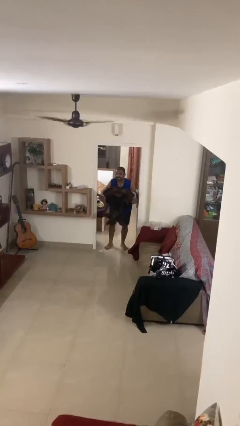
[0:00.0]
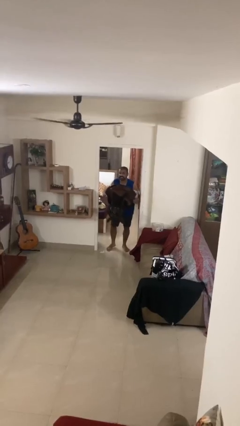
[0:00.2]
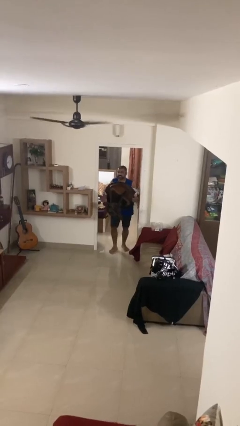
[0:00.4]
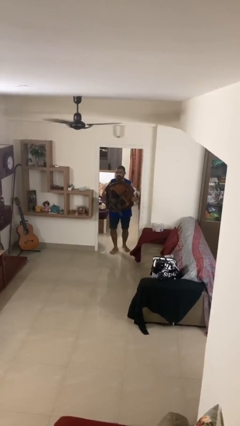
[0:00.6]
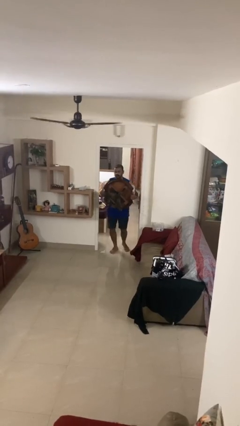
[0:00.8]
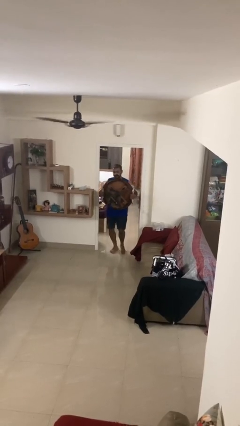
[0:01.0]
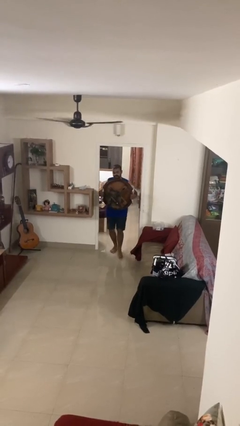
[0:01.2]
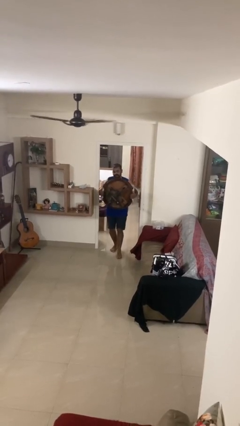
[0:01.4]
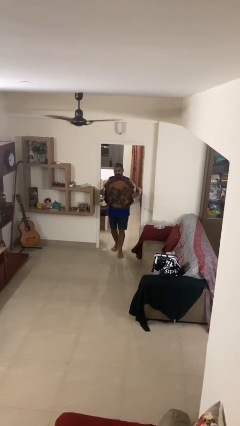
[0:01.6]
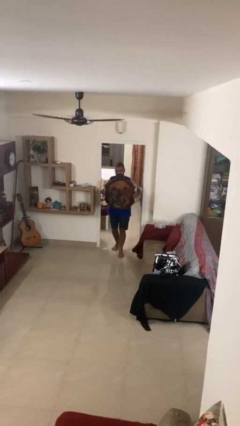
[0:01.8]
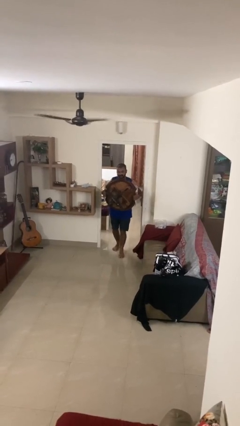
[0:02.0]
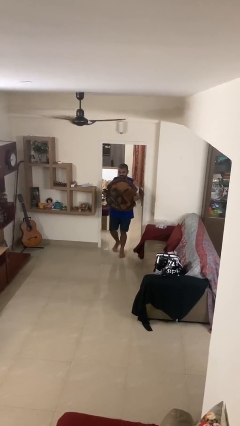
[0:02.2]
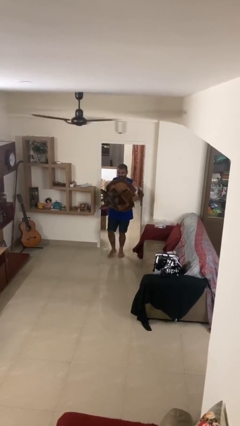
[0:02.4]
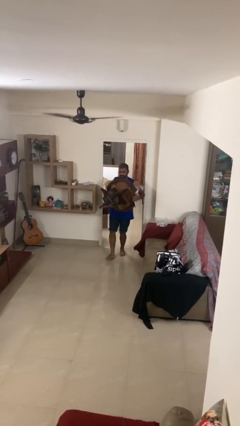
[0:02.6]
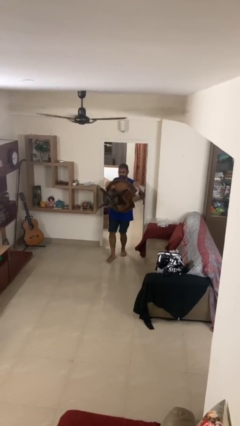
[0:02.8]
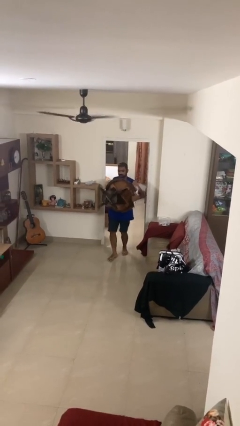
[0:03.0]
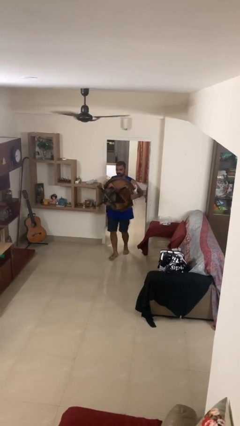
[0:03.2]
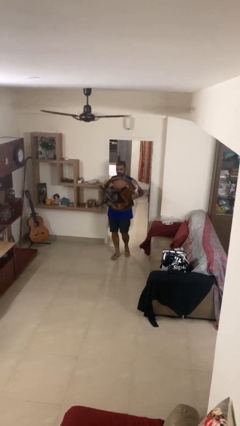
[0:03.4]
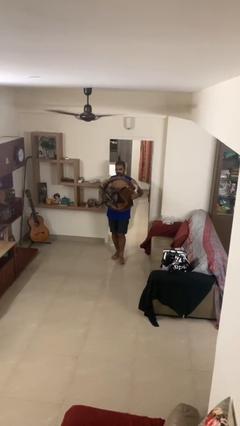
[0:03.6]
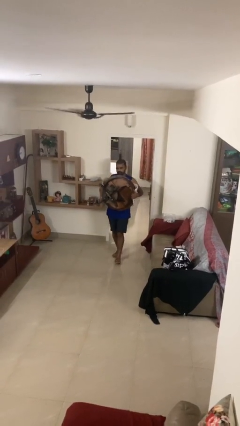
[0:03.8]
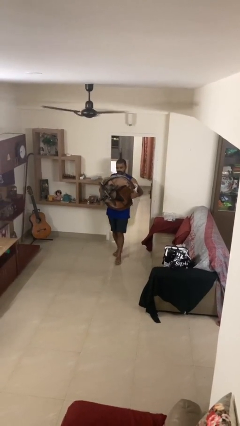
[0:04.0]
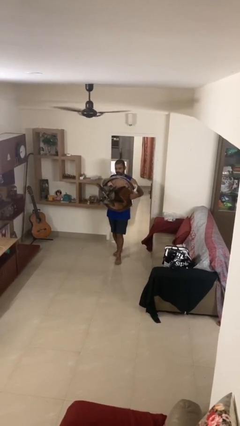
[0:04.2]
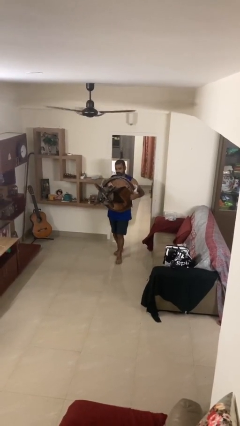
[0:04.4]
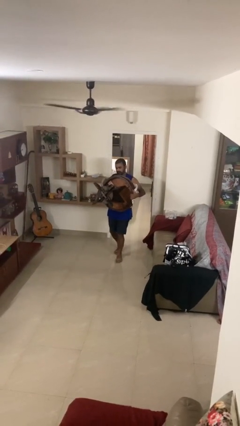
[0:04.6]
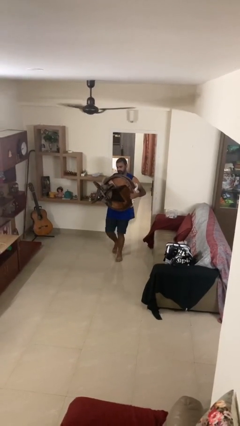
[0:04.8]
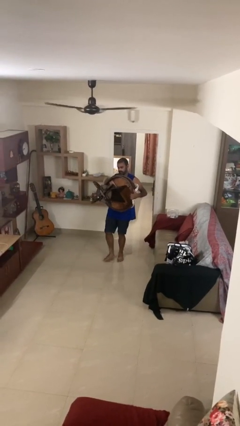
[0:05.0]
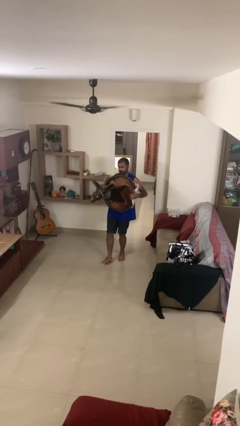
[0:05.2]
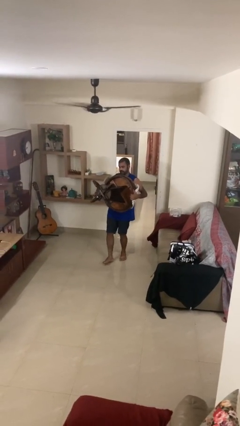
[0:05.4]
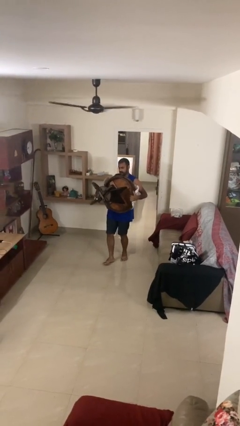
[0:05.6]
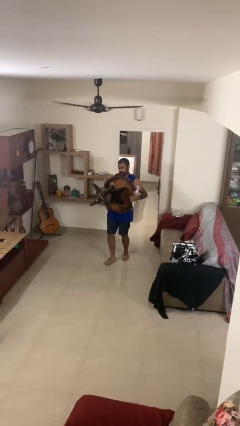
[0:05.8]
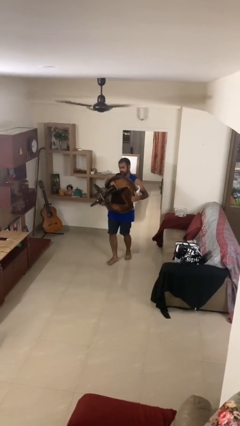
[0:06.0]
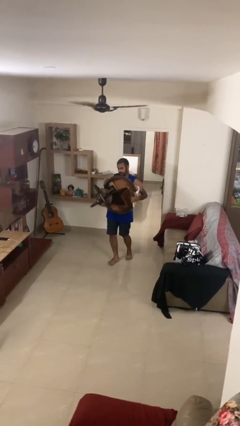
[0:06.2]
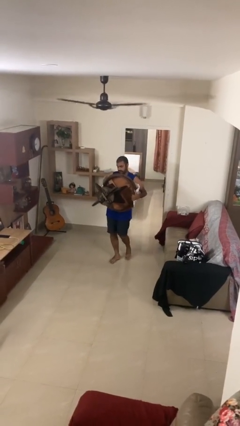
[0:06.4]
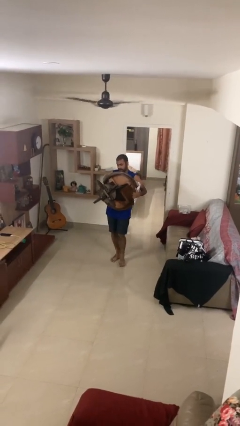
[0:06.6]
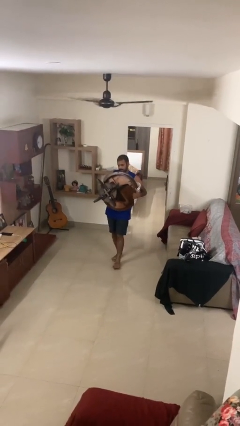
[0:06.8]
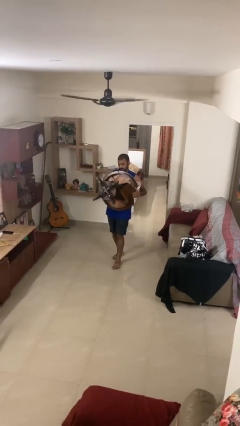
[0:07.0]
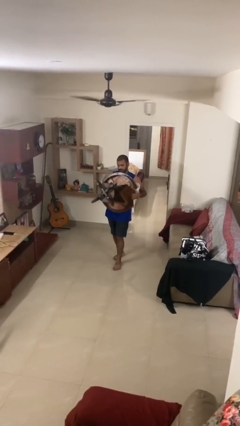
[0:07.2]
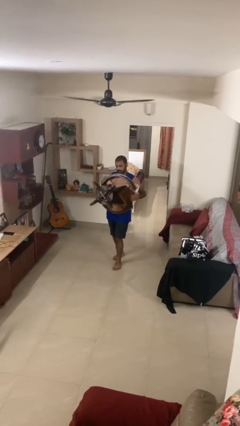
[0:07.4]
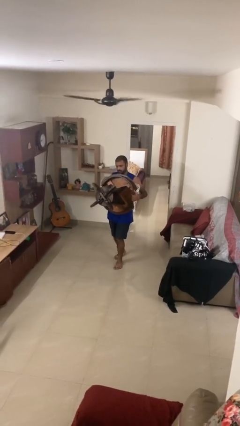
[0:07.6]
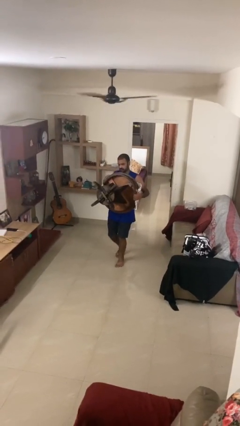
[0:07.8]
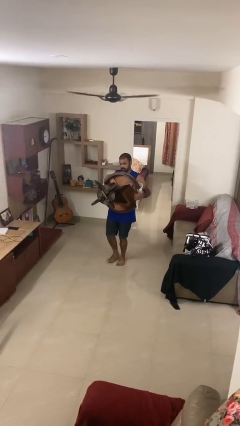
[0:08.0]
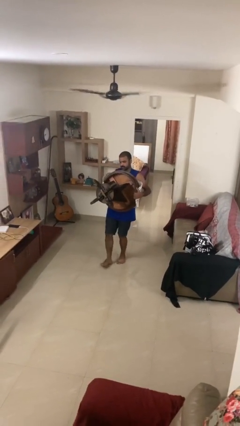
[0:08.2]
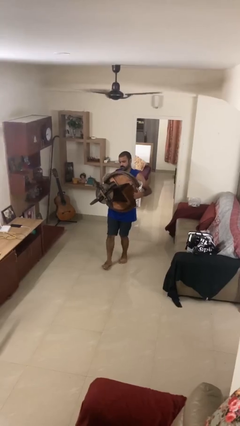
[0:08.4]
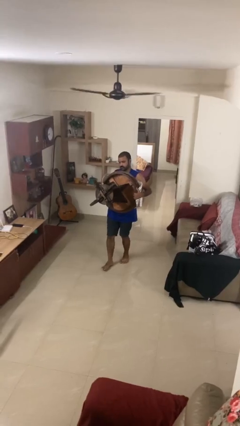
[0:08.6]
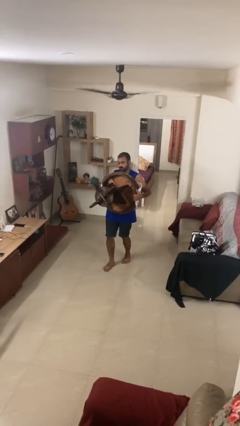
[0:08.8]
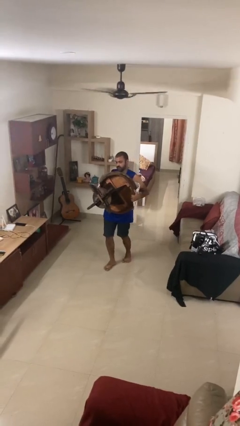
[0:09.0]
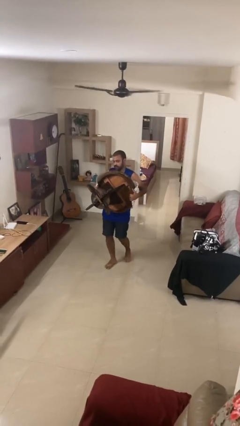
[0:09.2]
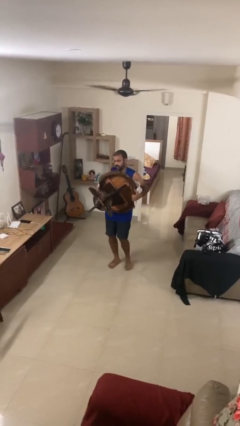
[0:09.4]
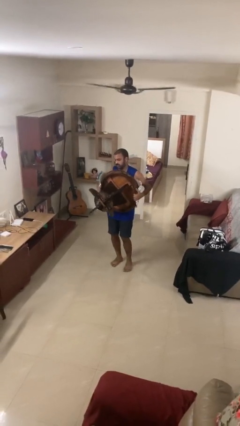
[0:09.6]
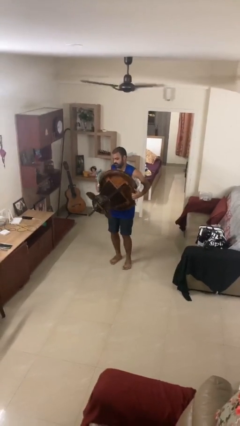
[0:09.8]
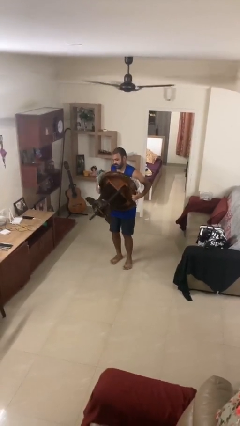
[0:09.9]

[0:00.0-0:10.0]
person carries heavy object

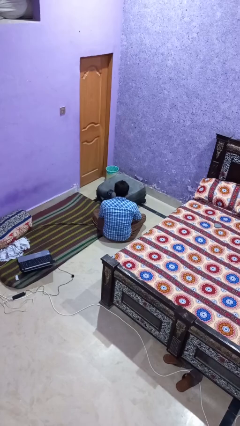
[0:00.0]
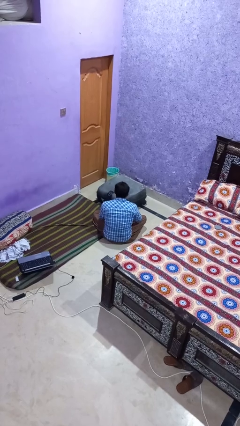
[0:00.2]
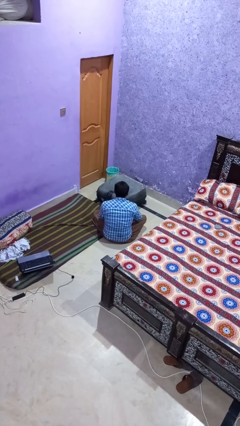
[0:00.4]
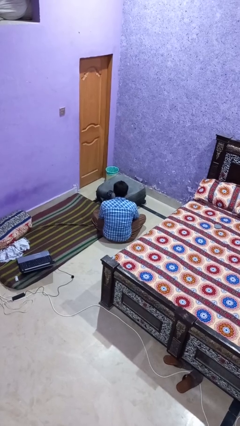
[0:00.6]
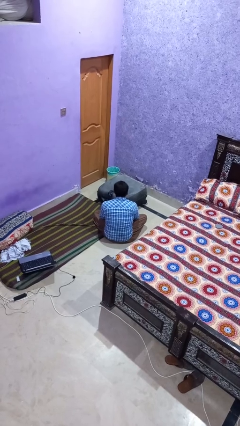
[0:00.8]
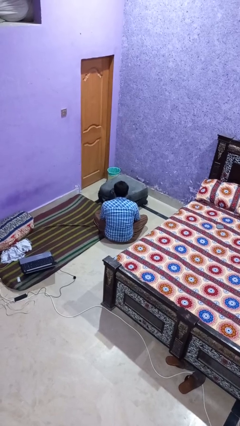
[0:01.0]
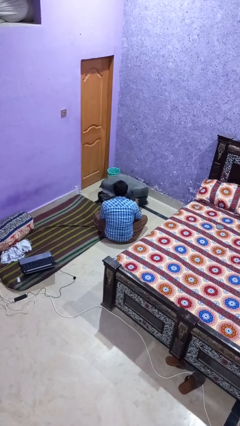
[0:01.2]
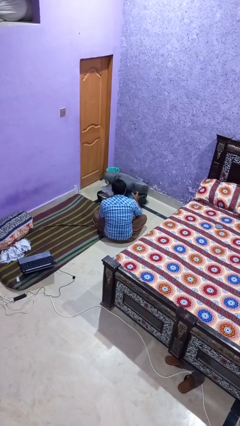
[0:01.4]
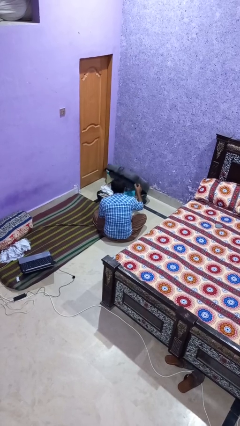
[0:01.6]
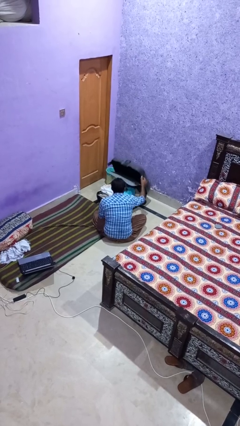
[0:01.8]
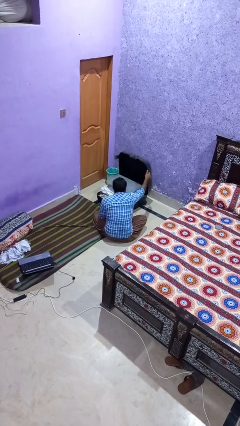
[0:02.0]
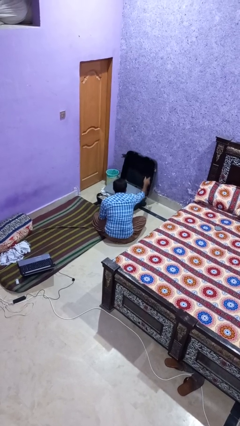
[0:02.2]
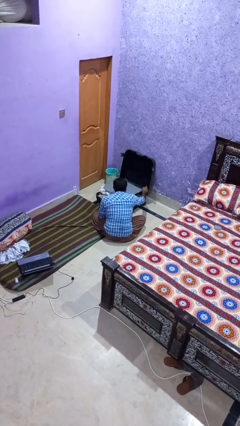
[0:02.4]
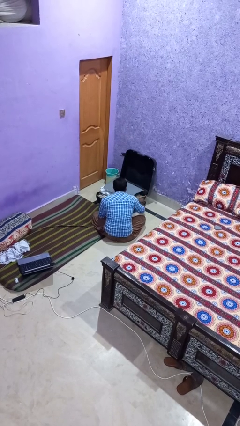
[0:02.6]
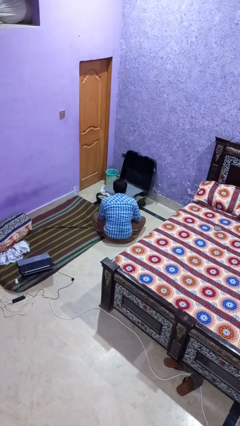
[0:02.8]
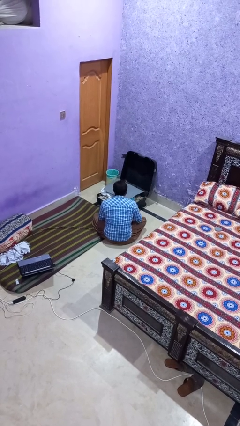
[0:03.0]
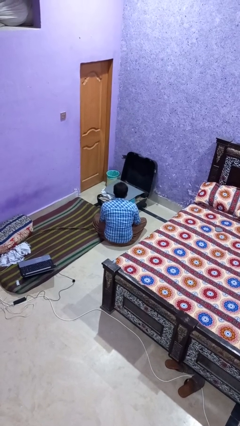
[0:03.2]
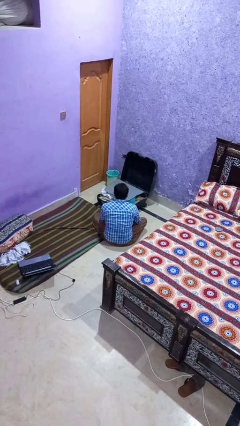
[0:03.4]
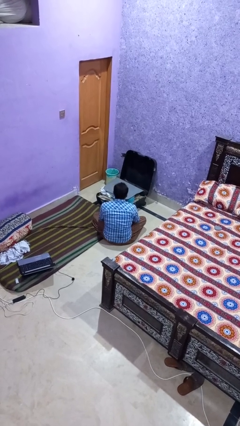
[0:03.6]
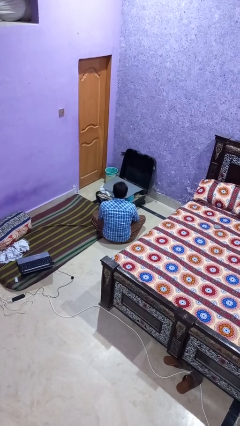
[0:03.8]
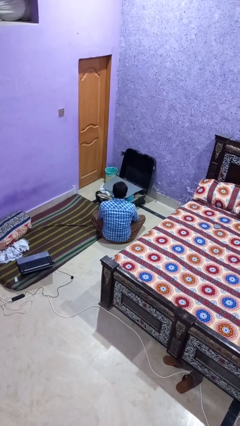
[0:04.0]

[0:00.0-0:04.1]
person opens suitcase

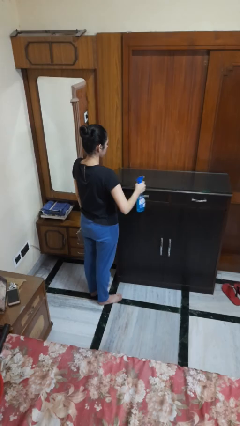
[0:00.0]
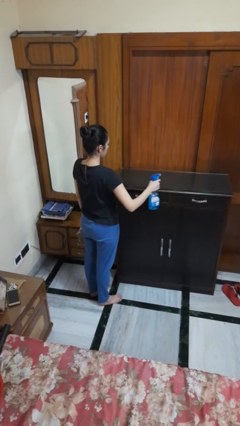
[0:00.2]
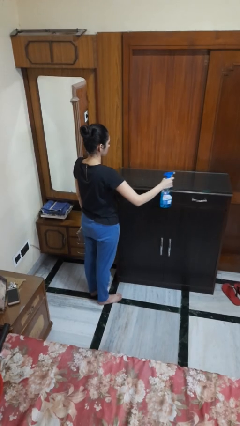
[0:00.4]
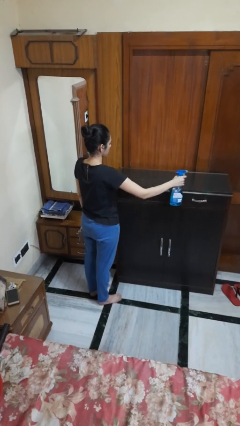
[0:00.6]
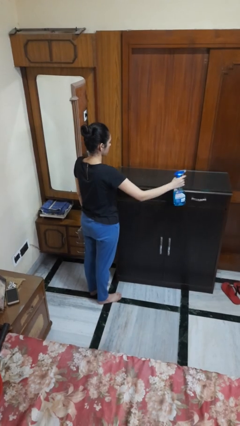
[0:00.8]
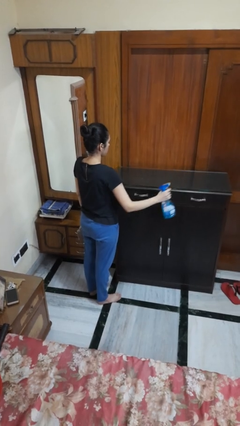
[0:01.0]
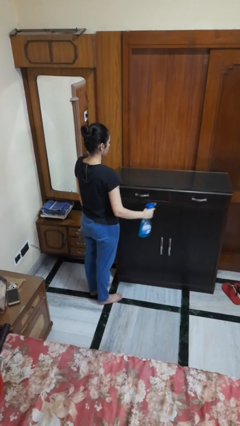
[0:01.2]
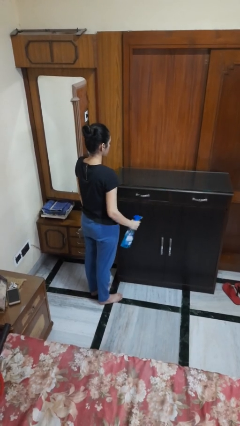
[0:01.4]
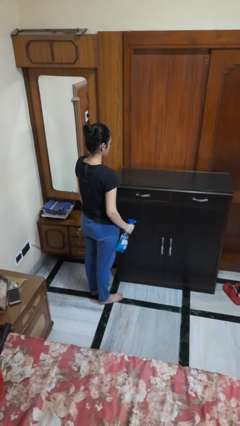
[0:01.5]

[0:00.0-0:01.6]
person sprays from bottle

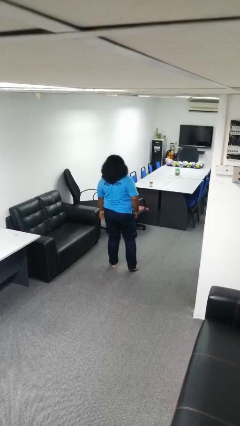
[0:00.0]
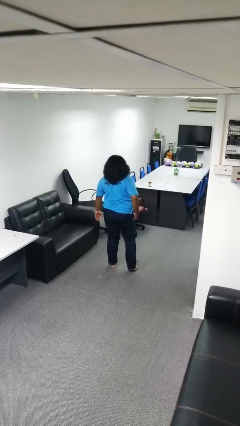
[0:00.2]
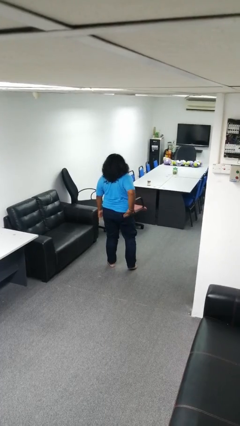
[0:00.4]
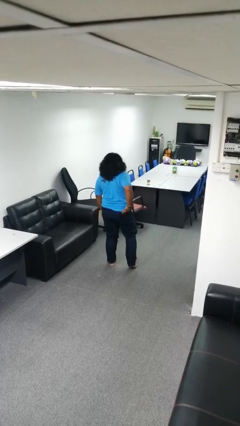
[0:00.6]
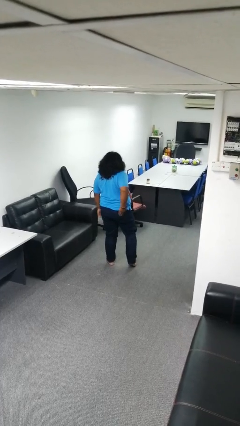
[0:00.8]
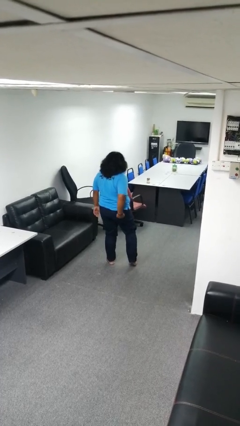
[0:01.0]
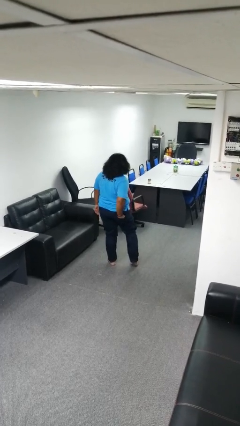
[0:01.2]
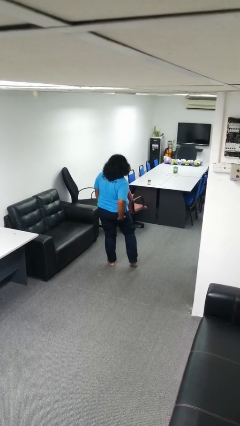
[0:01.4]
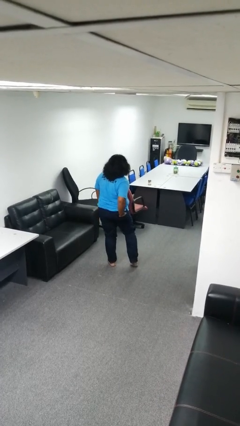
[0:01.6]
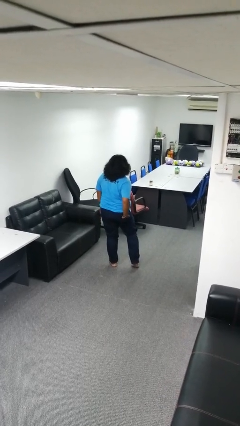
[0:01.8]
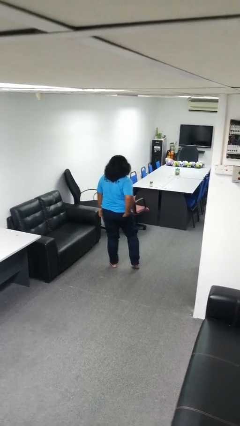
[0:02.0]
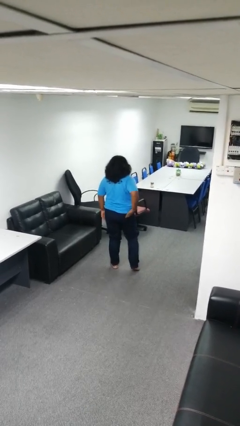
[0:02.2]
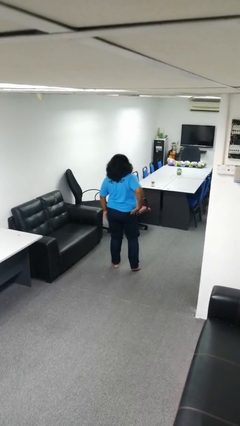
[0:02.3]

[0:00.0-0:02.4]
person puts hands in back pockets

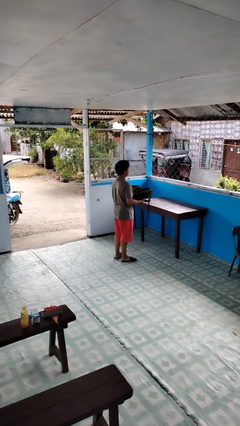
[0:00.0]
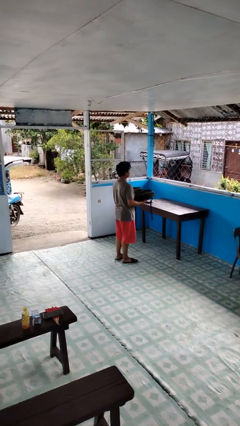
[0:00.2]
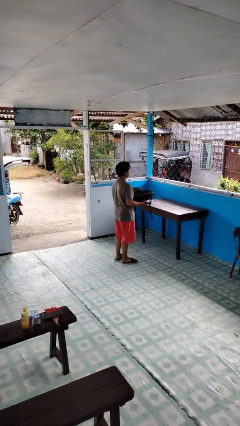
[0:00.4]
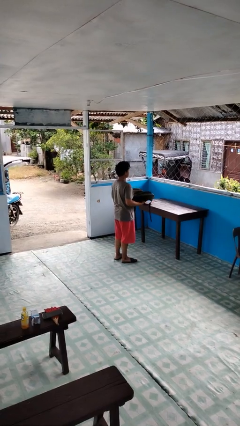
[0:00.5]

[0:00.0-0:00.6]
person throws object on table
